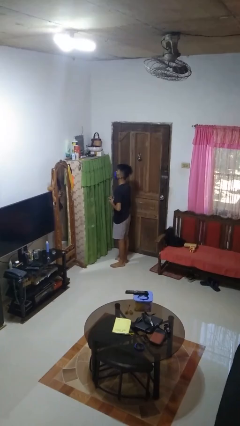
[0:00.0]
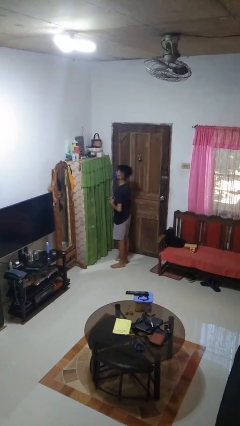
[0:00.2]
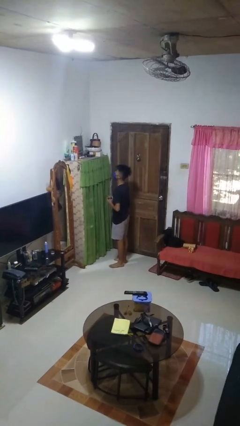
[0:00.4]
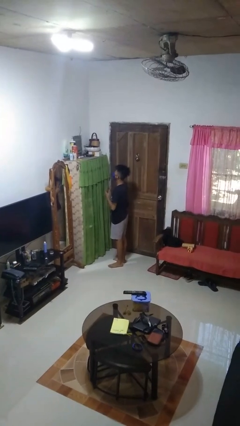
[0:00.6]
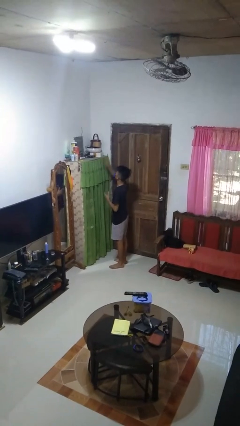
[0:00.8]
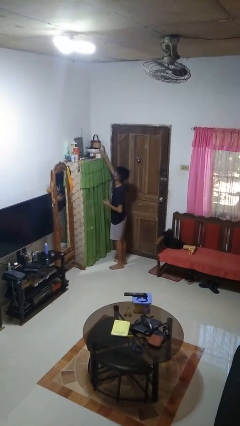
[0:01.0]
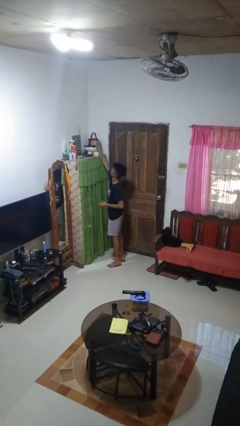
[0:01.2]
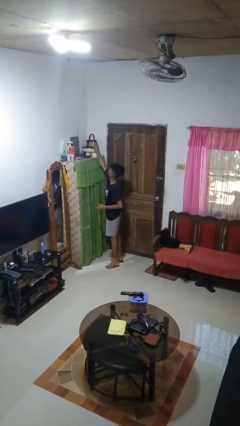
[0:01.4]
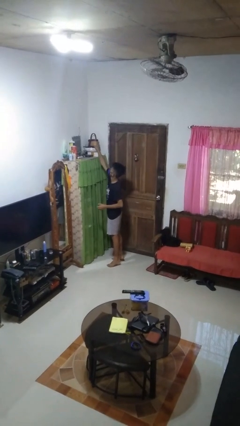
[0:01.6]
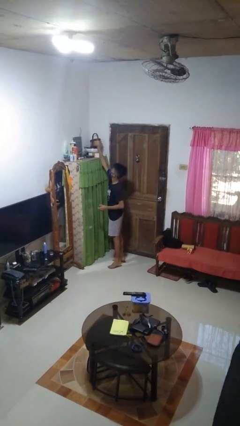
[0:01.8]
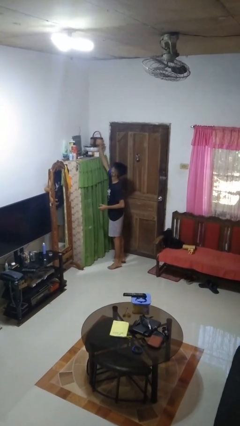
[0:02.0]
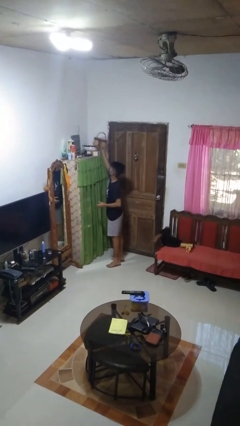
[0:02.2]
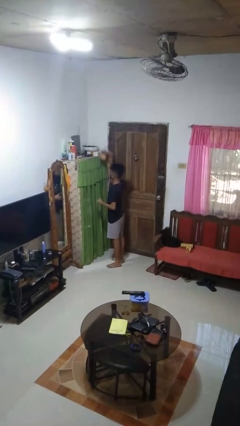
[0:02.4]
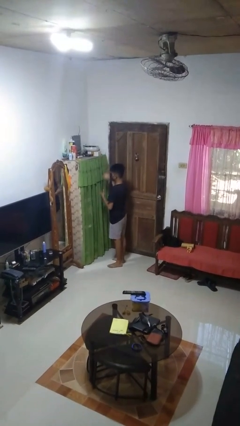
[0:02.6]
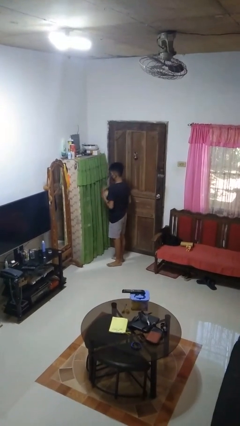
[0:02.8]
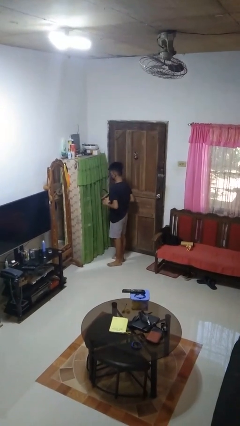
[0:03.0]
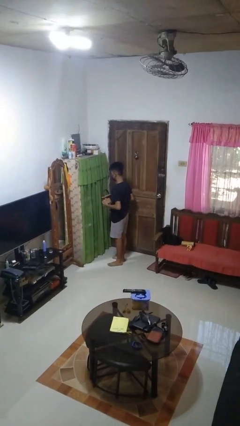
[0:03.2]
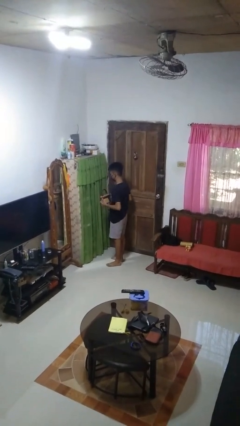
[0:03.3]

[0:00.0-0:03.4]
person picks up object from shelf

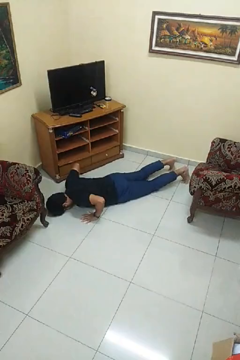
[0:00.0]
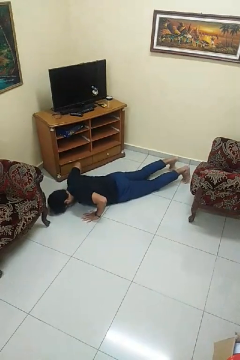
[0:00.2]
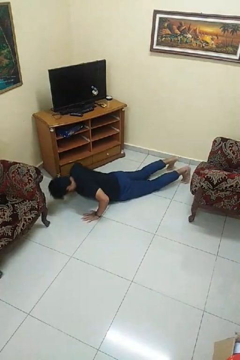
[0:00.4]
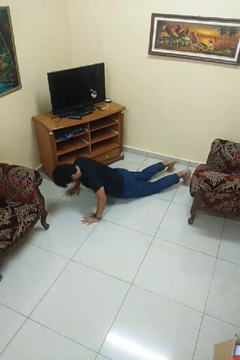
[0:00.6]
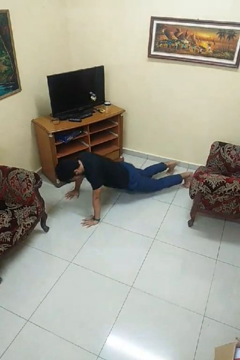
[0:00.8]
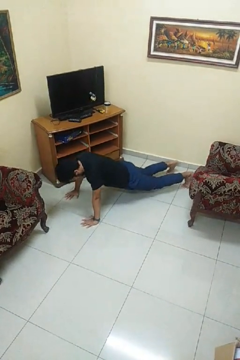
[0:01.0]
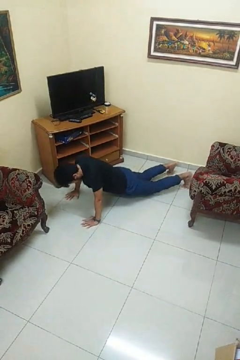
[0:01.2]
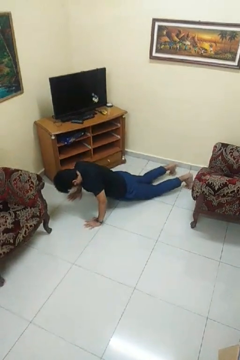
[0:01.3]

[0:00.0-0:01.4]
person exercises with pushup

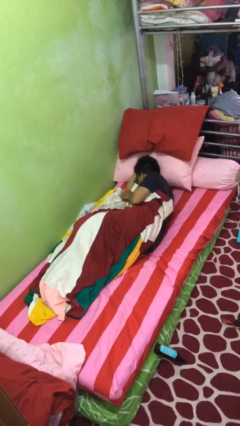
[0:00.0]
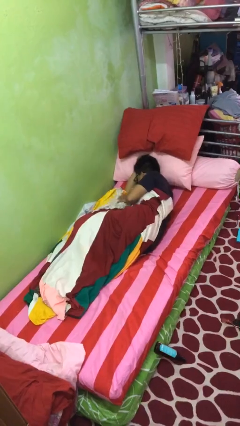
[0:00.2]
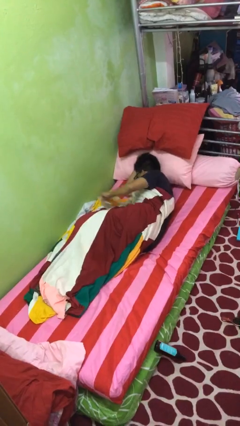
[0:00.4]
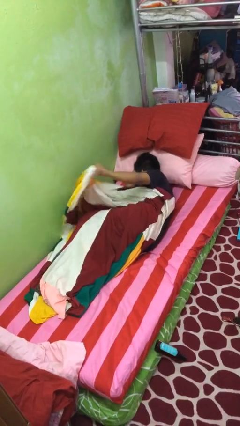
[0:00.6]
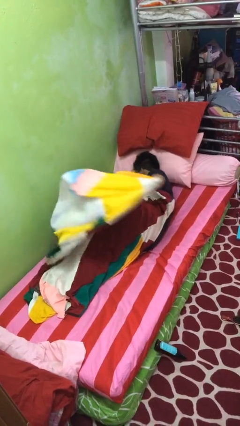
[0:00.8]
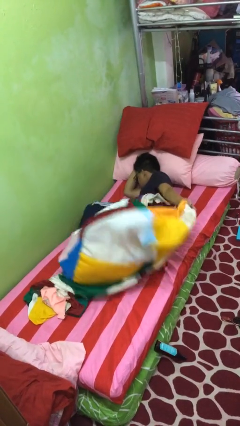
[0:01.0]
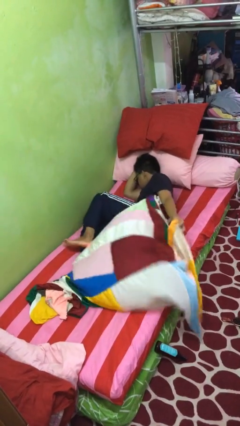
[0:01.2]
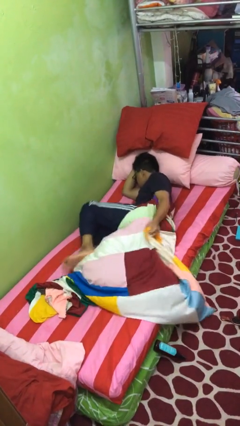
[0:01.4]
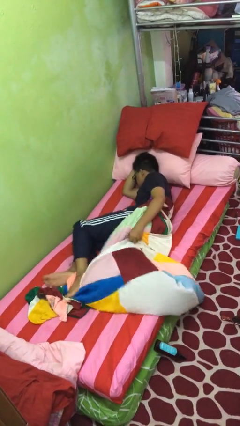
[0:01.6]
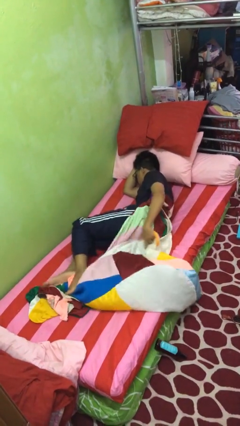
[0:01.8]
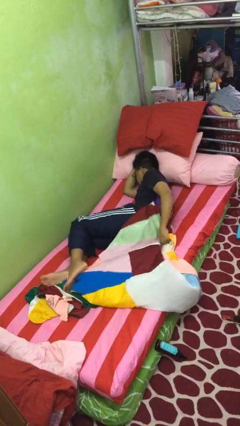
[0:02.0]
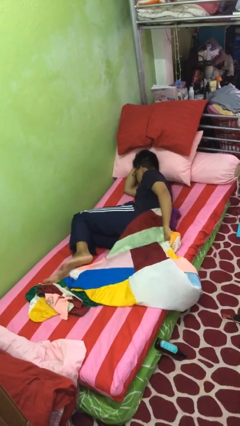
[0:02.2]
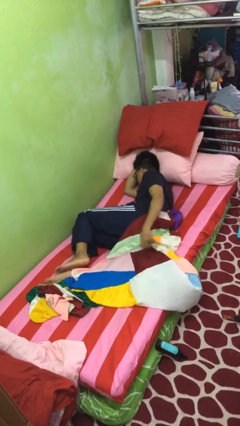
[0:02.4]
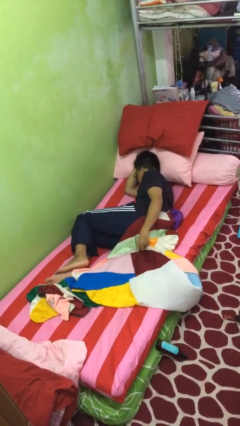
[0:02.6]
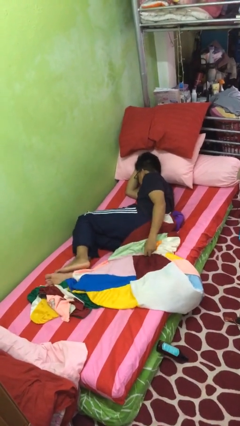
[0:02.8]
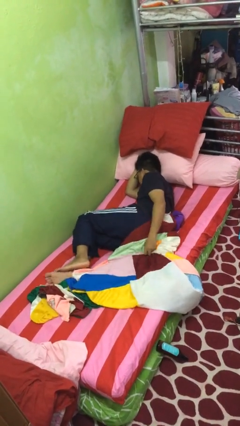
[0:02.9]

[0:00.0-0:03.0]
person uncovers with blanket

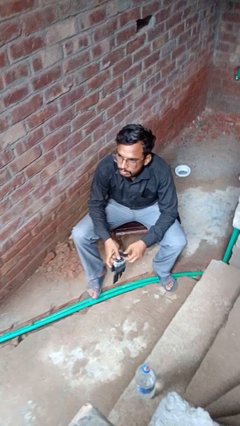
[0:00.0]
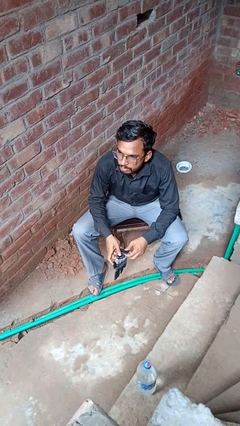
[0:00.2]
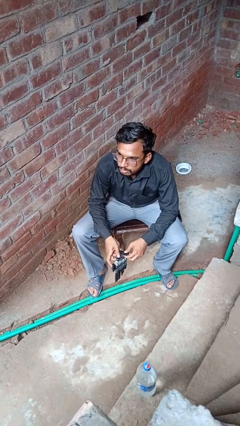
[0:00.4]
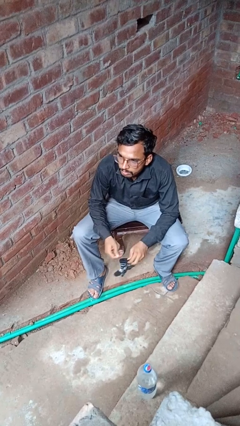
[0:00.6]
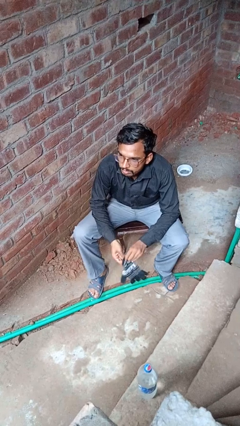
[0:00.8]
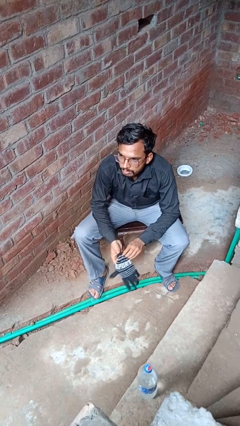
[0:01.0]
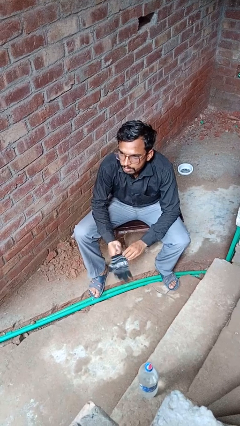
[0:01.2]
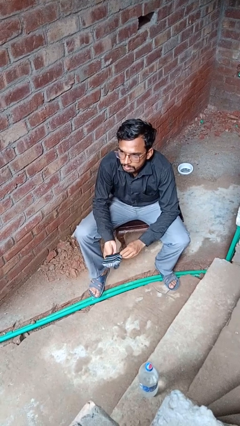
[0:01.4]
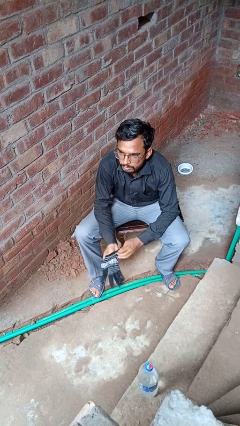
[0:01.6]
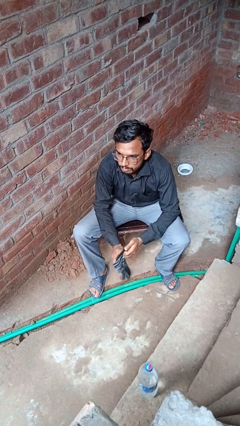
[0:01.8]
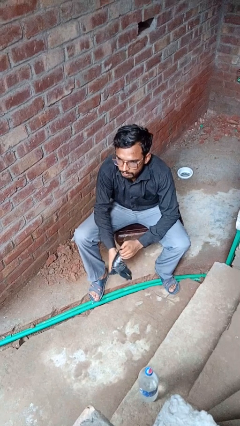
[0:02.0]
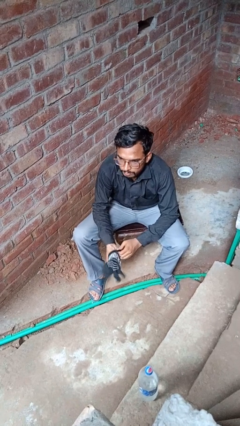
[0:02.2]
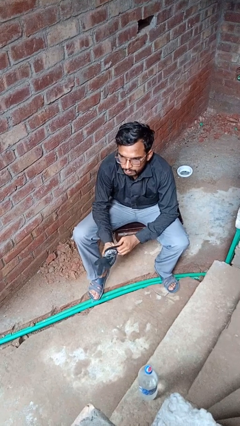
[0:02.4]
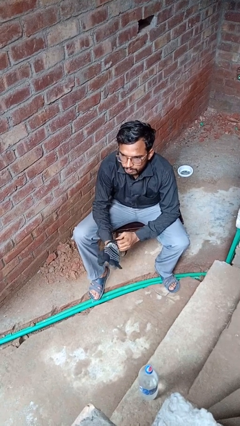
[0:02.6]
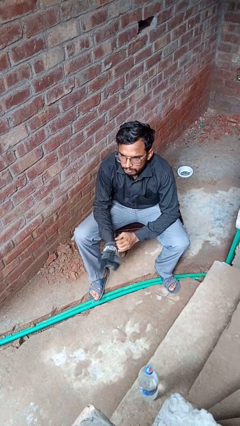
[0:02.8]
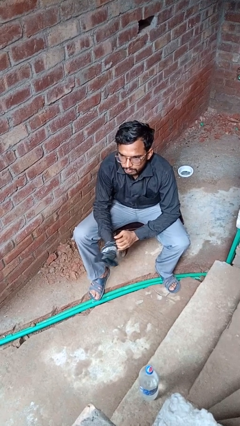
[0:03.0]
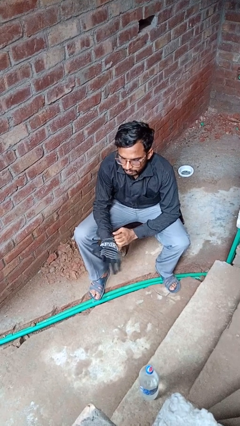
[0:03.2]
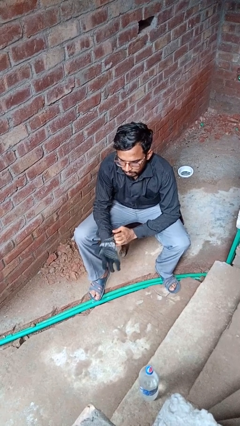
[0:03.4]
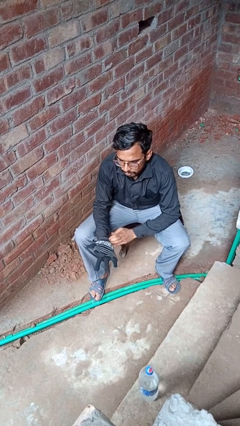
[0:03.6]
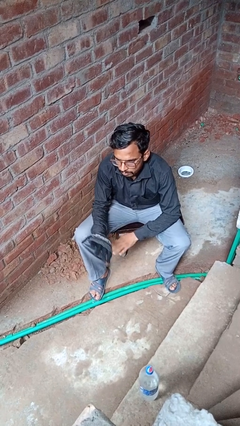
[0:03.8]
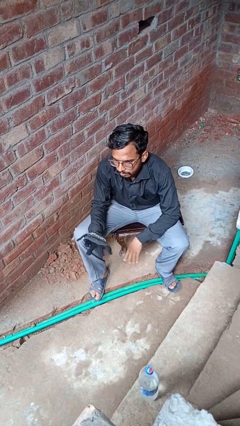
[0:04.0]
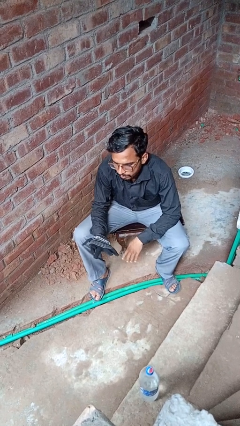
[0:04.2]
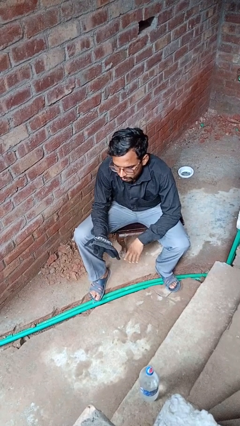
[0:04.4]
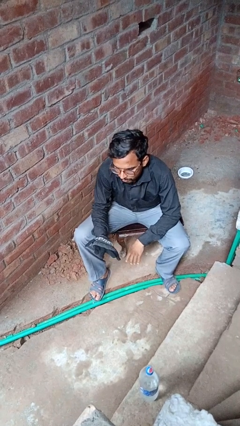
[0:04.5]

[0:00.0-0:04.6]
person puts on gloves

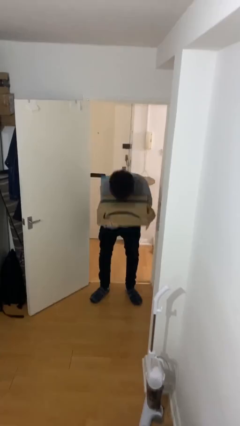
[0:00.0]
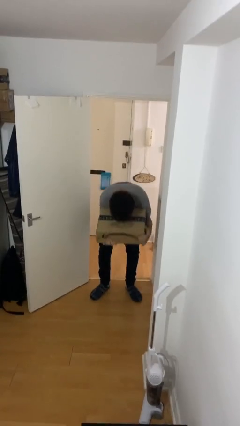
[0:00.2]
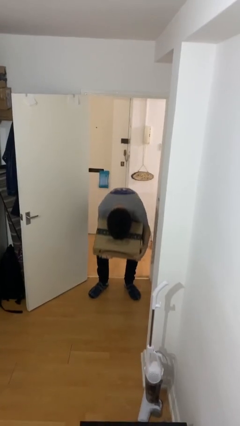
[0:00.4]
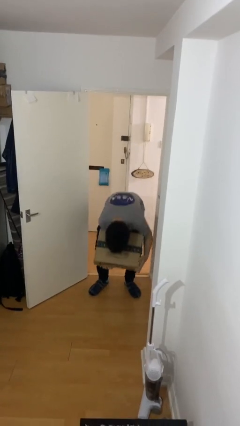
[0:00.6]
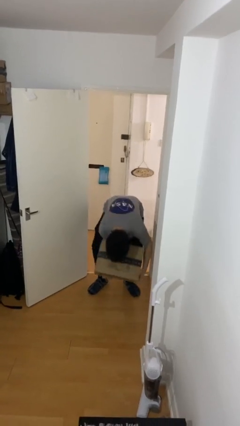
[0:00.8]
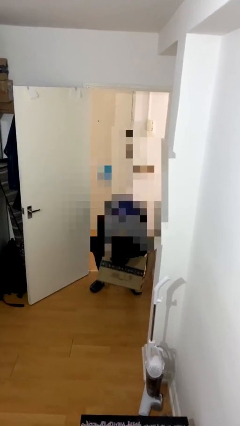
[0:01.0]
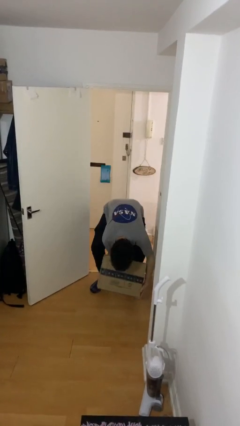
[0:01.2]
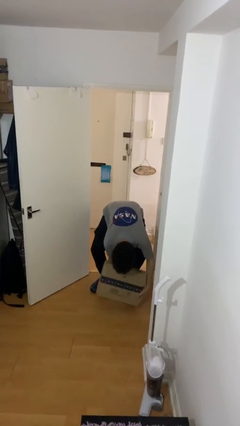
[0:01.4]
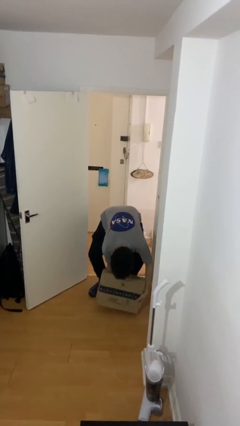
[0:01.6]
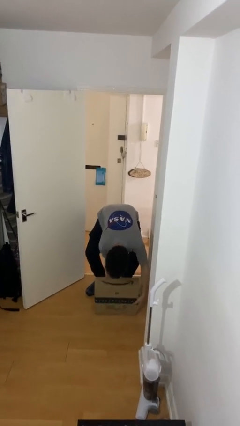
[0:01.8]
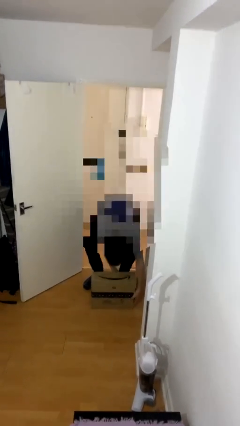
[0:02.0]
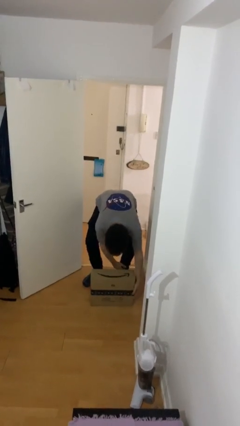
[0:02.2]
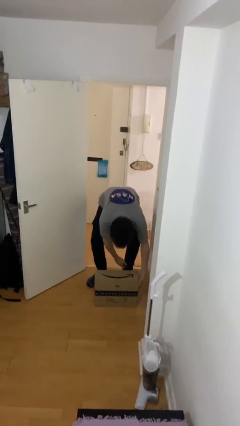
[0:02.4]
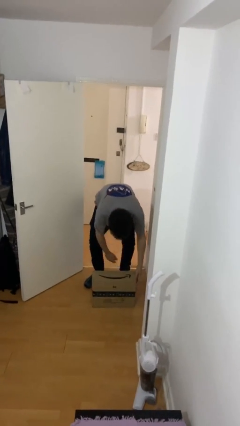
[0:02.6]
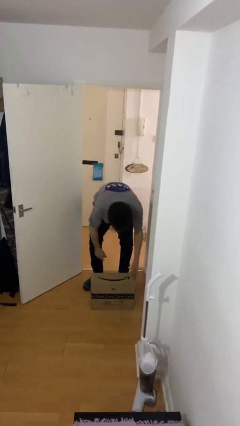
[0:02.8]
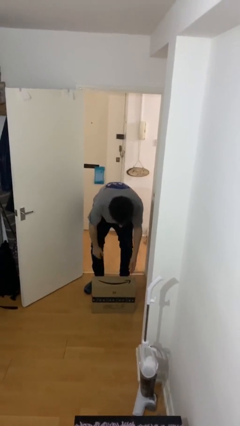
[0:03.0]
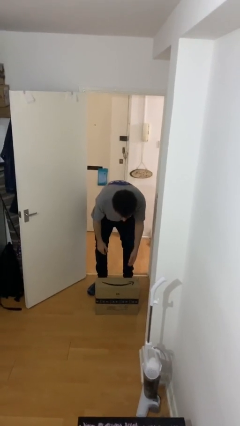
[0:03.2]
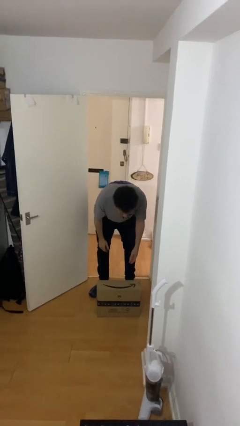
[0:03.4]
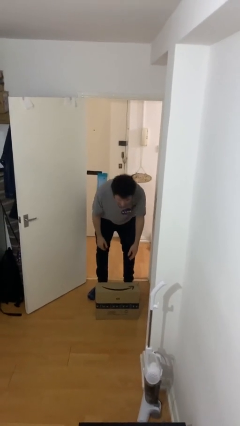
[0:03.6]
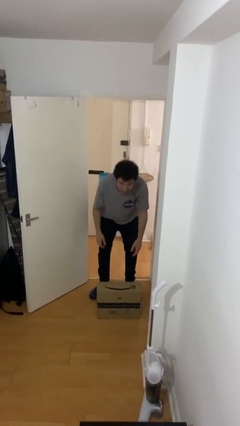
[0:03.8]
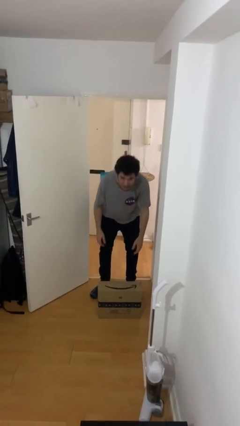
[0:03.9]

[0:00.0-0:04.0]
person puts down object on floor

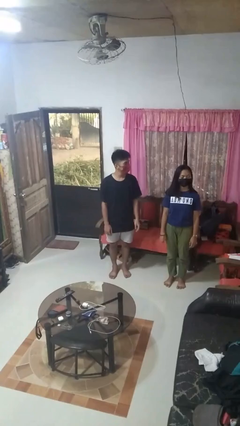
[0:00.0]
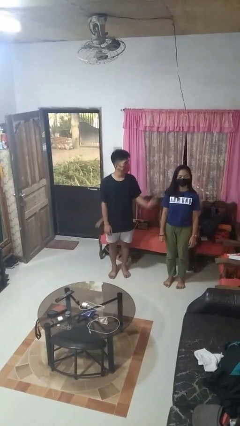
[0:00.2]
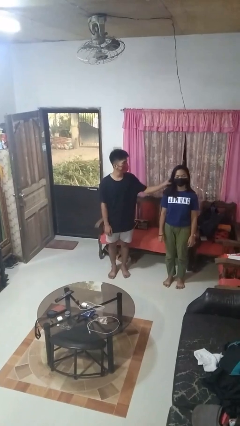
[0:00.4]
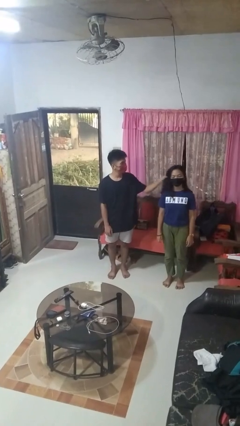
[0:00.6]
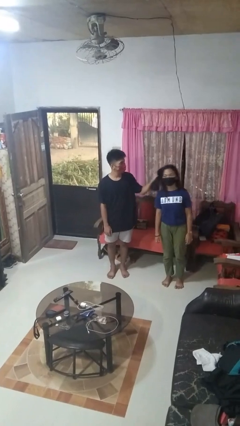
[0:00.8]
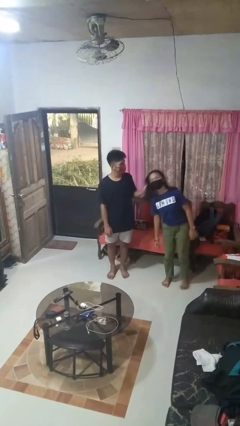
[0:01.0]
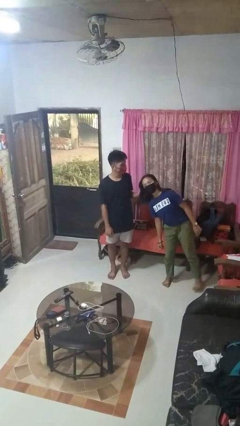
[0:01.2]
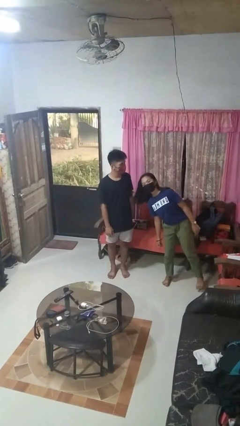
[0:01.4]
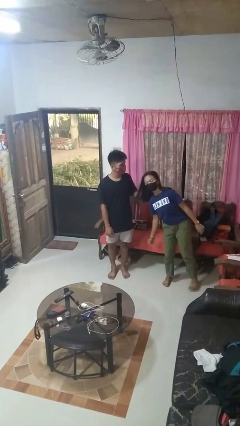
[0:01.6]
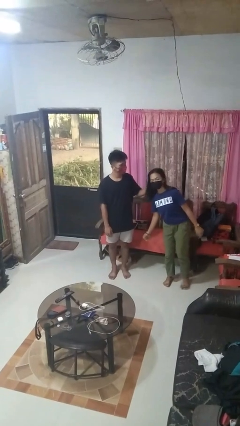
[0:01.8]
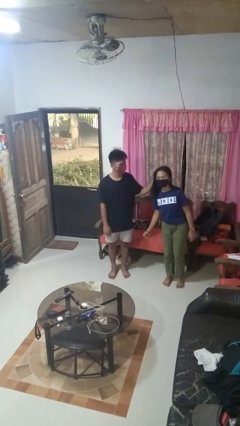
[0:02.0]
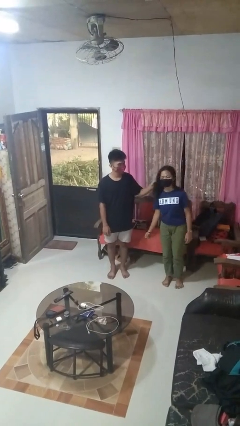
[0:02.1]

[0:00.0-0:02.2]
person grabs person by hair
